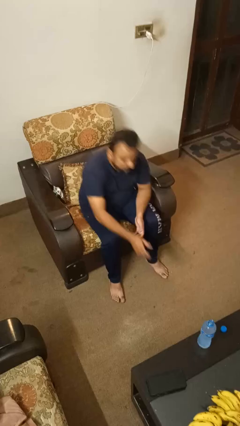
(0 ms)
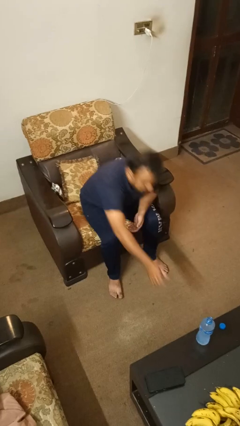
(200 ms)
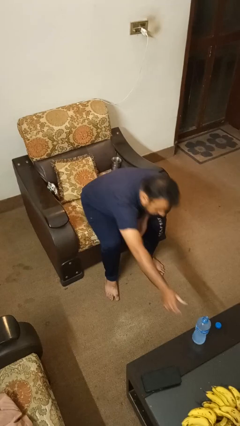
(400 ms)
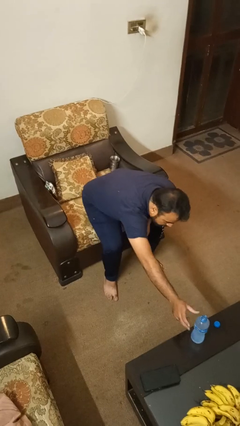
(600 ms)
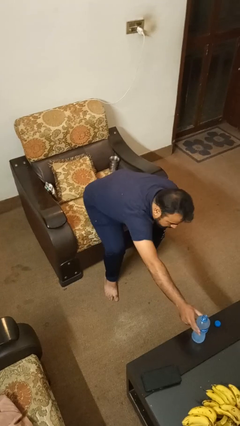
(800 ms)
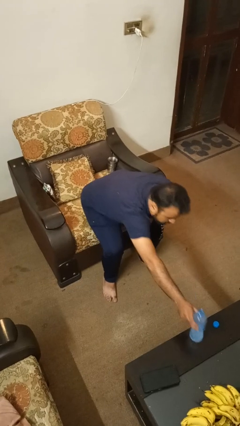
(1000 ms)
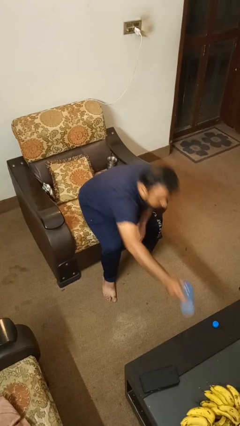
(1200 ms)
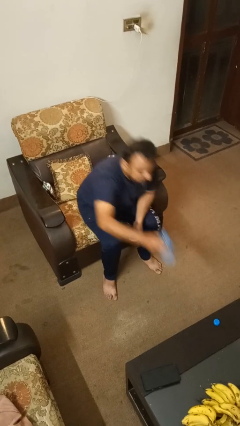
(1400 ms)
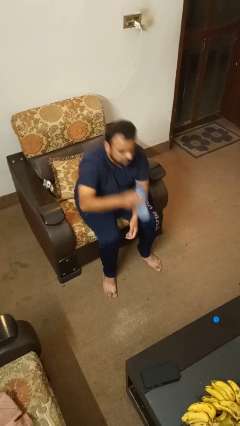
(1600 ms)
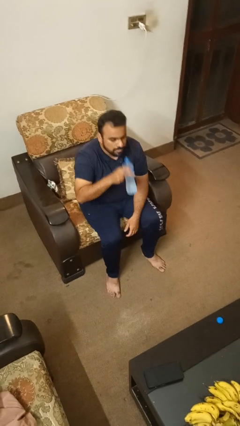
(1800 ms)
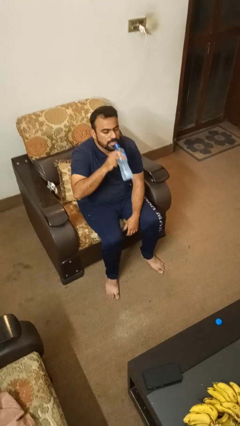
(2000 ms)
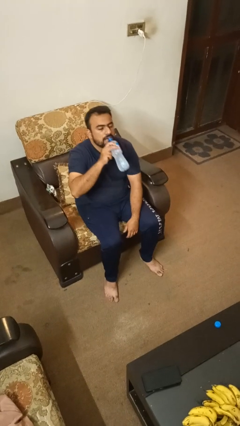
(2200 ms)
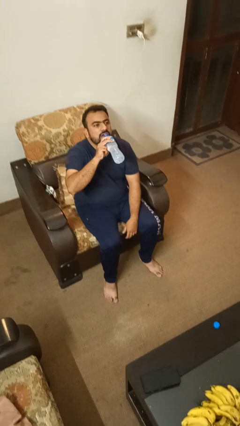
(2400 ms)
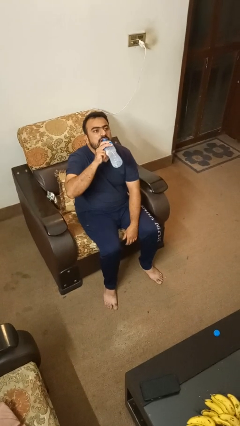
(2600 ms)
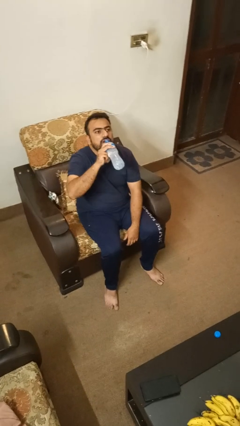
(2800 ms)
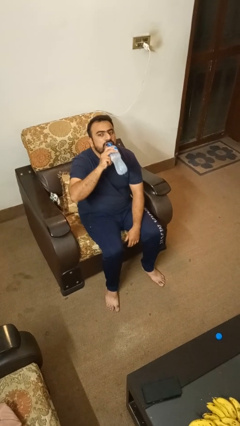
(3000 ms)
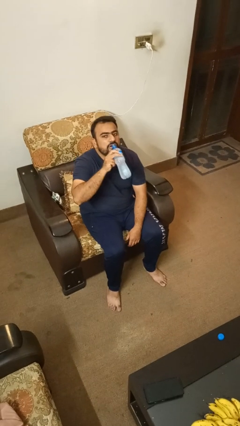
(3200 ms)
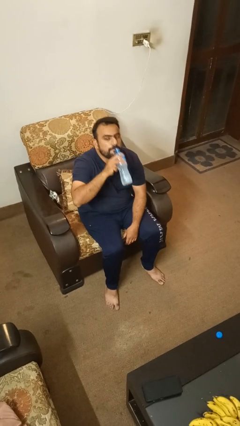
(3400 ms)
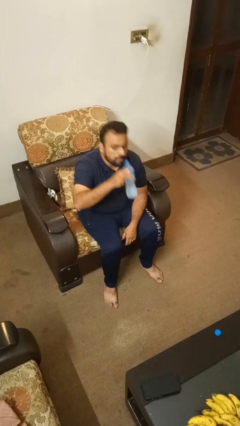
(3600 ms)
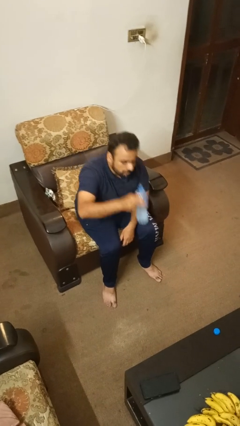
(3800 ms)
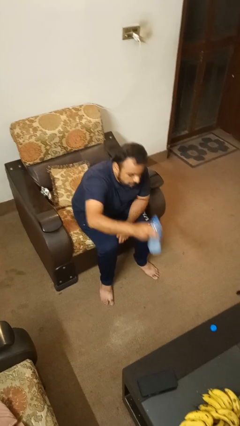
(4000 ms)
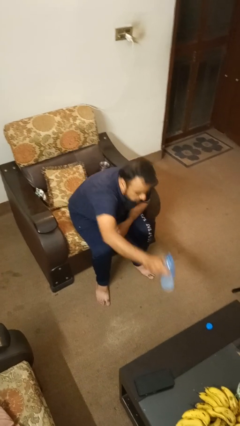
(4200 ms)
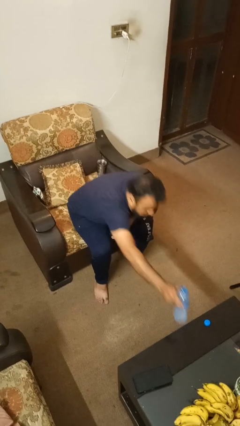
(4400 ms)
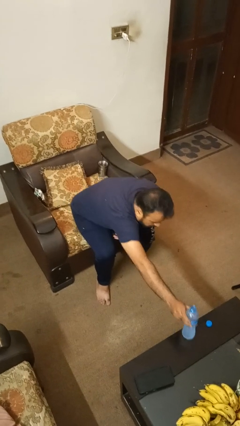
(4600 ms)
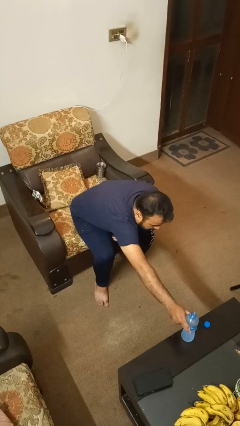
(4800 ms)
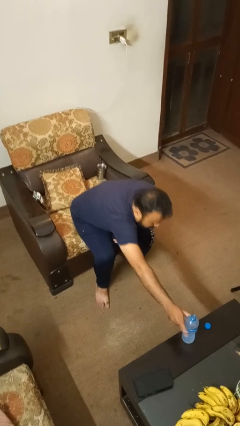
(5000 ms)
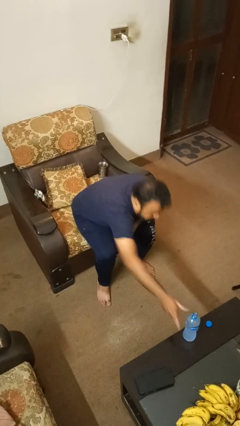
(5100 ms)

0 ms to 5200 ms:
person drinks from bottle

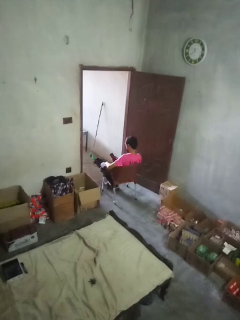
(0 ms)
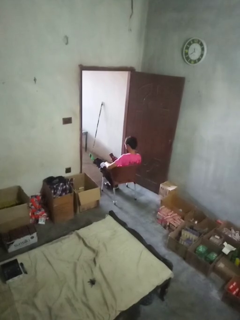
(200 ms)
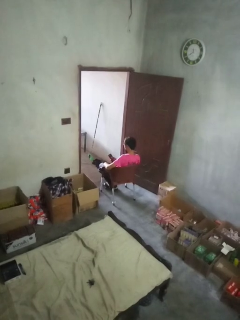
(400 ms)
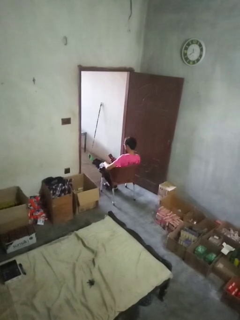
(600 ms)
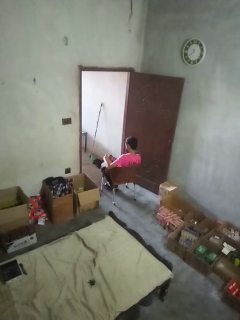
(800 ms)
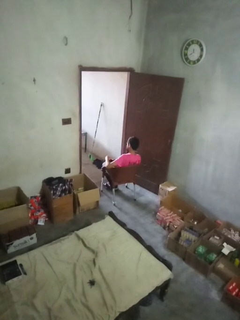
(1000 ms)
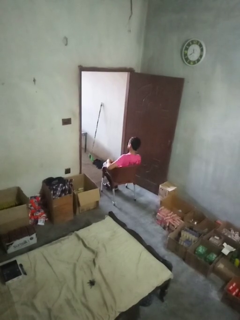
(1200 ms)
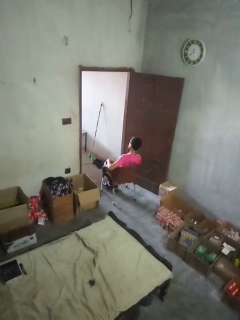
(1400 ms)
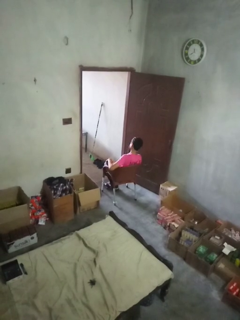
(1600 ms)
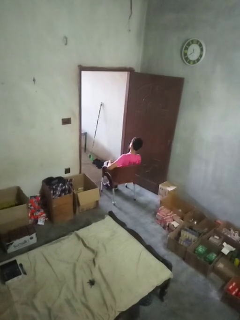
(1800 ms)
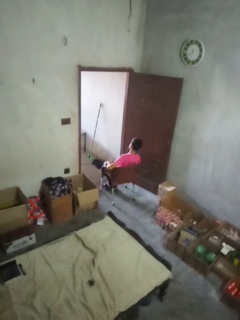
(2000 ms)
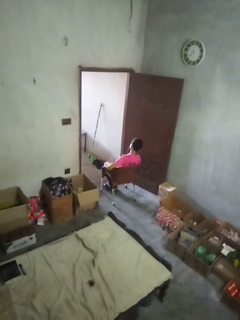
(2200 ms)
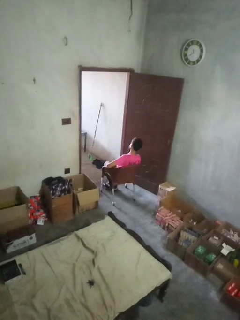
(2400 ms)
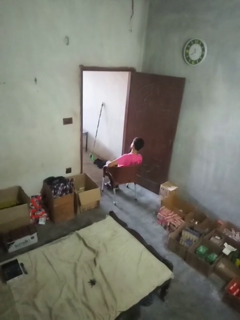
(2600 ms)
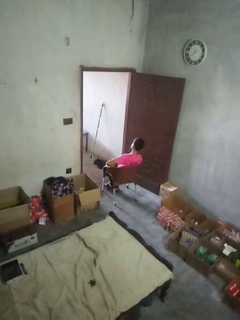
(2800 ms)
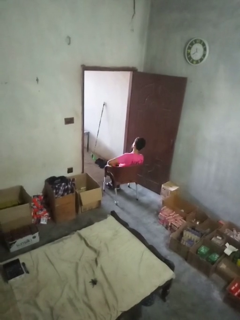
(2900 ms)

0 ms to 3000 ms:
person puts phone into pocket

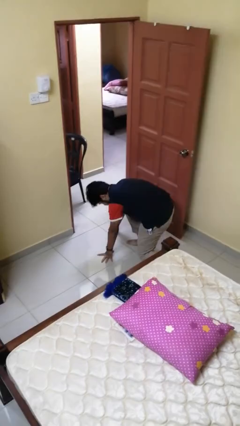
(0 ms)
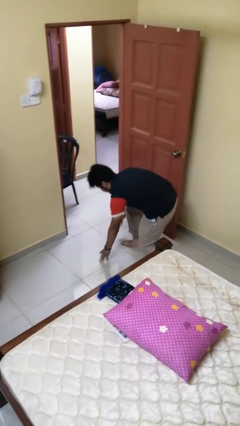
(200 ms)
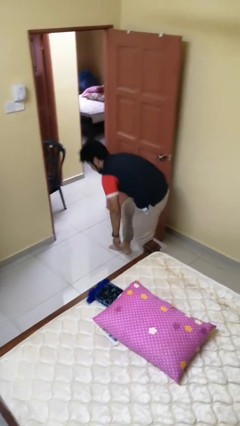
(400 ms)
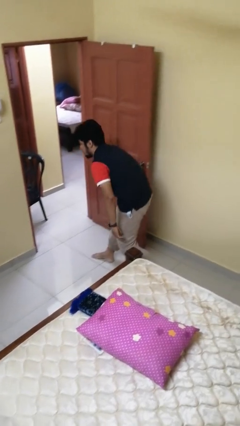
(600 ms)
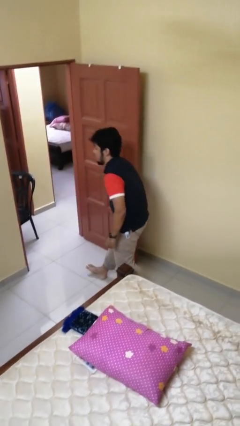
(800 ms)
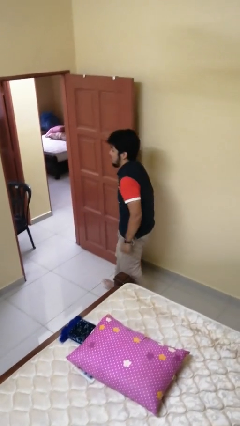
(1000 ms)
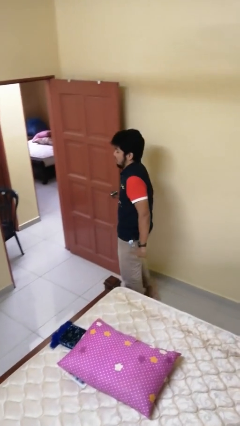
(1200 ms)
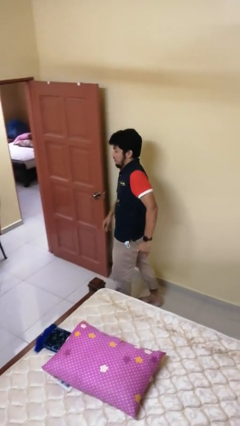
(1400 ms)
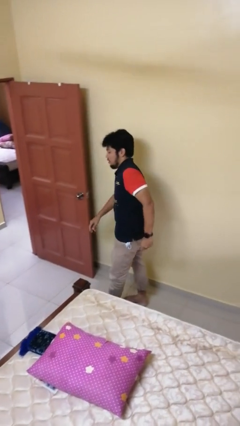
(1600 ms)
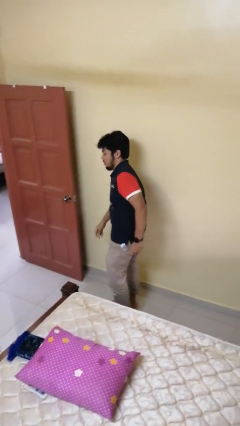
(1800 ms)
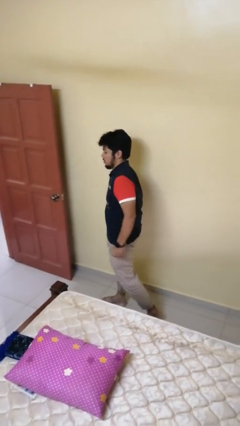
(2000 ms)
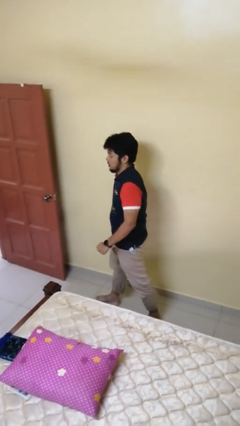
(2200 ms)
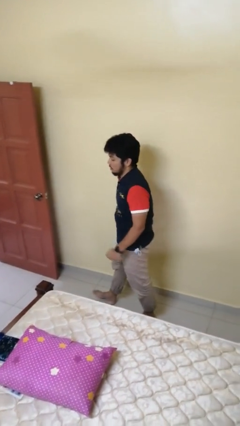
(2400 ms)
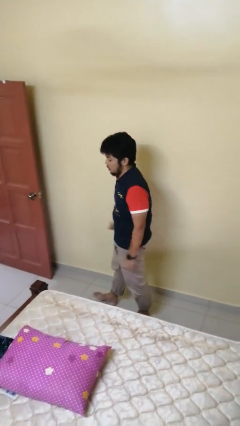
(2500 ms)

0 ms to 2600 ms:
person stands up from floor

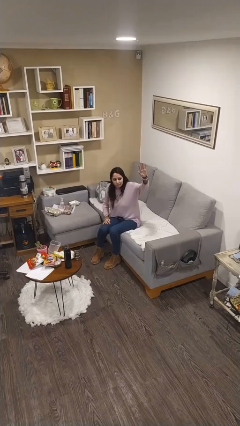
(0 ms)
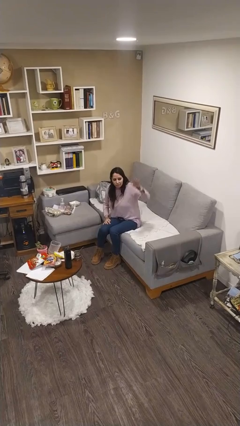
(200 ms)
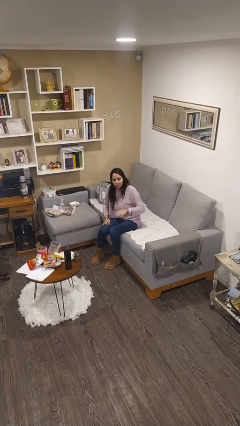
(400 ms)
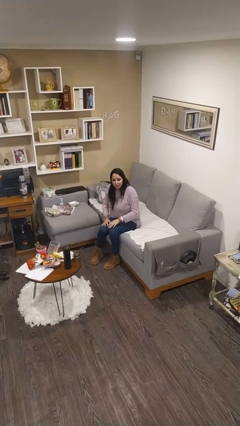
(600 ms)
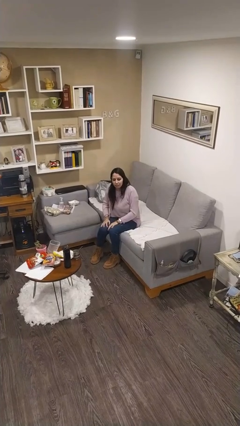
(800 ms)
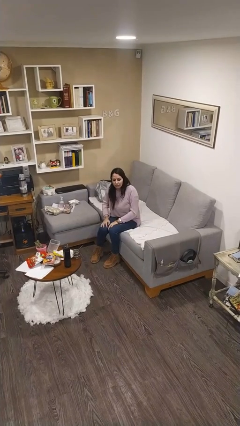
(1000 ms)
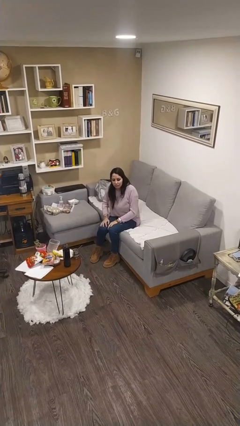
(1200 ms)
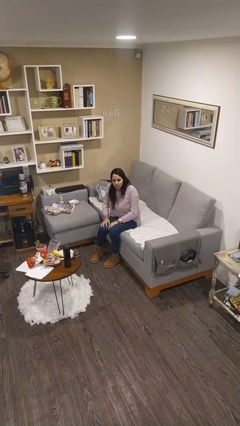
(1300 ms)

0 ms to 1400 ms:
person gestures lower hand

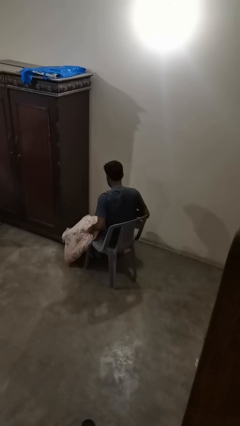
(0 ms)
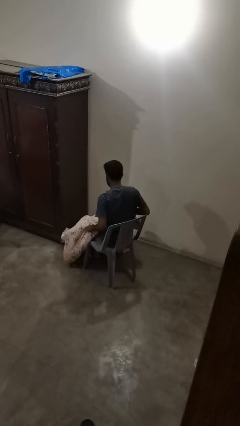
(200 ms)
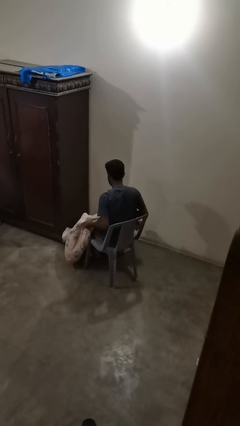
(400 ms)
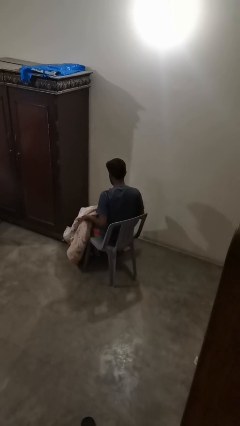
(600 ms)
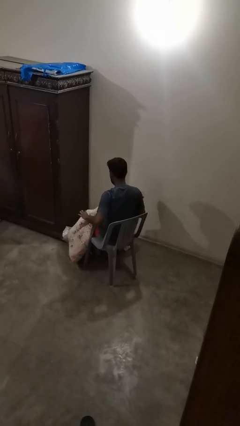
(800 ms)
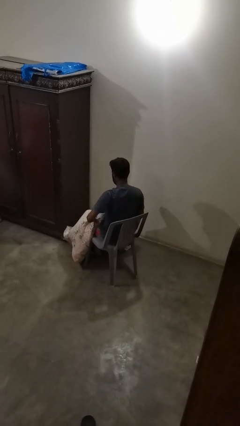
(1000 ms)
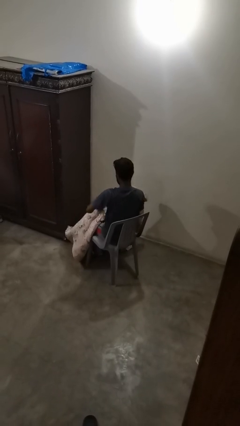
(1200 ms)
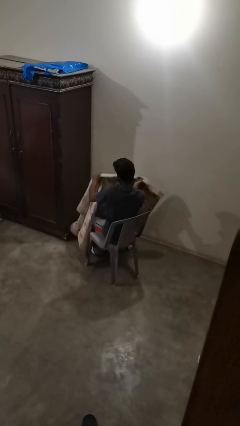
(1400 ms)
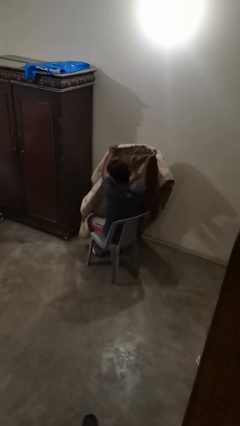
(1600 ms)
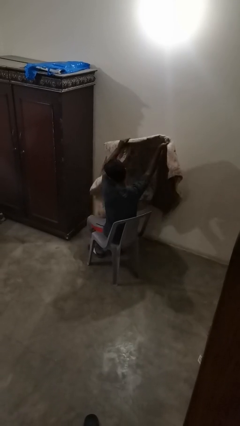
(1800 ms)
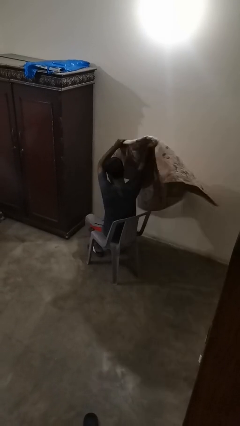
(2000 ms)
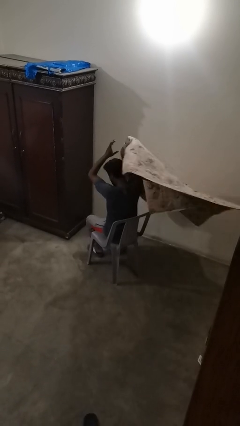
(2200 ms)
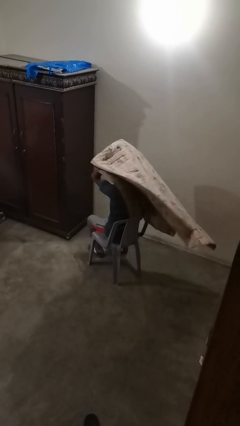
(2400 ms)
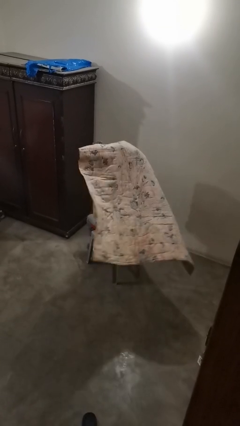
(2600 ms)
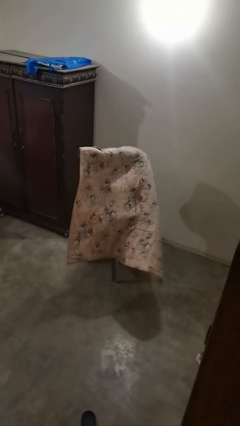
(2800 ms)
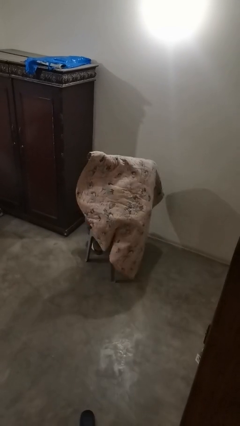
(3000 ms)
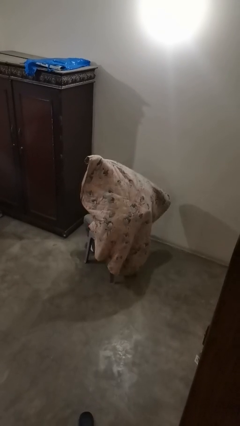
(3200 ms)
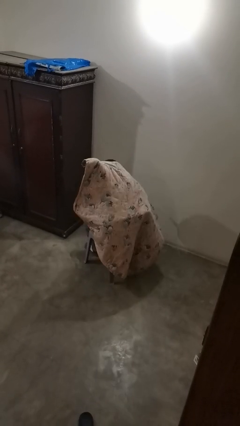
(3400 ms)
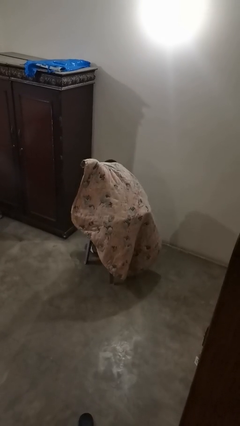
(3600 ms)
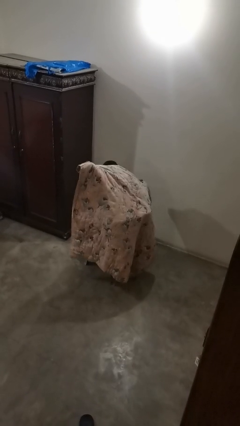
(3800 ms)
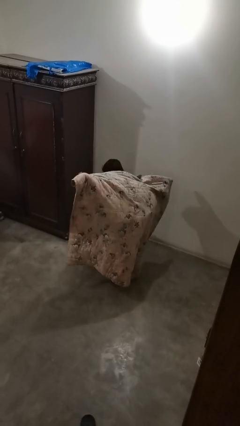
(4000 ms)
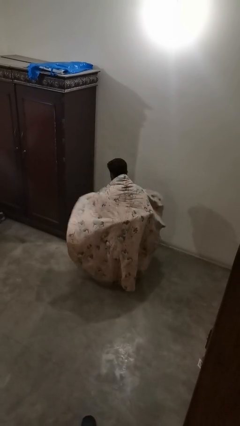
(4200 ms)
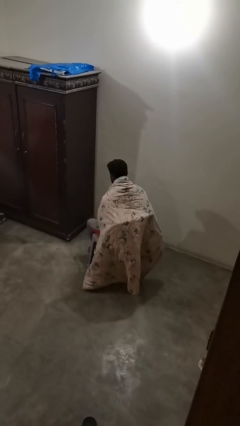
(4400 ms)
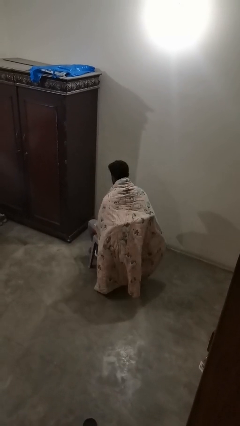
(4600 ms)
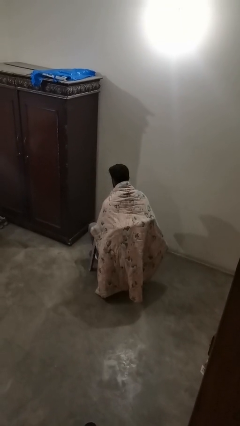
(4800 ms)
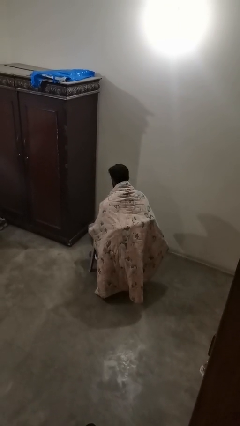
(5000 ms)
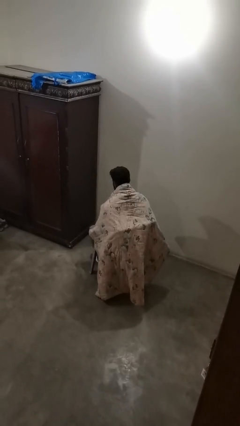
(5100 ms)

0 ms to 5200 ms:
person covers with blanket

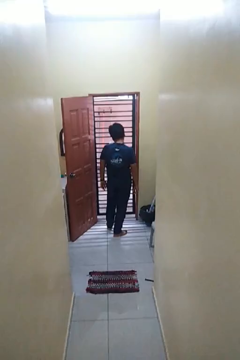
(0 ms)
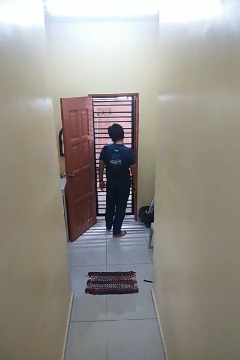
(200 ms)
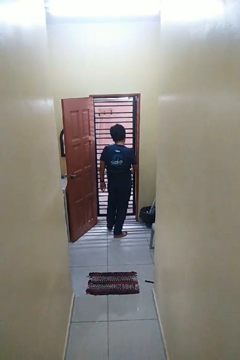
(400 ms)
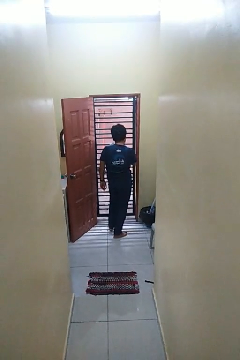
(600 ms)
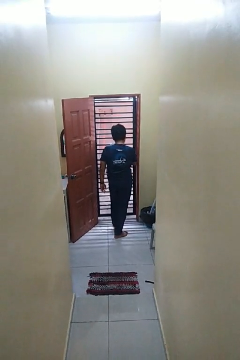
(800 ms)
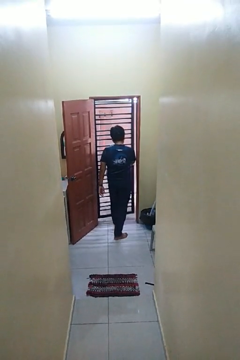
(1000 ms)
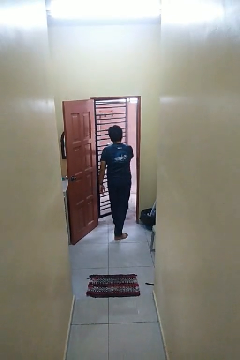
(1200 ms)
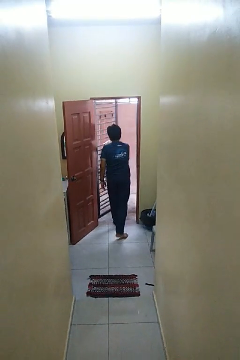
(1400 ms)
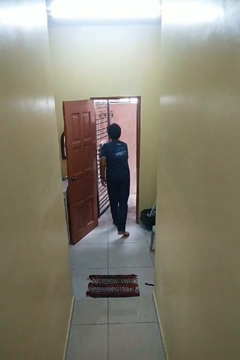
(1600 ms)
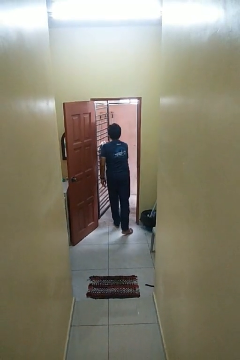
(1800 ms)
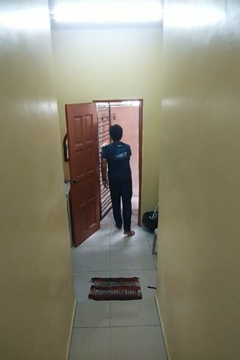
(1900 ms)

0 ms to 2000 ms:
person opens gate
